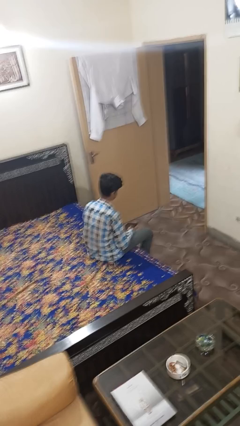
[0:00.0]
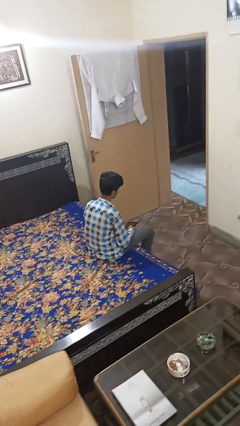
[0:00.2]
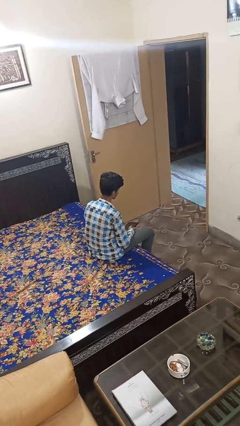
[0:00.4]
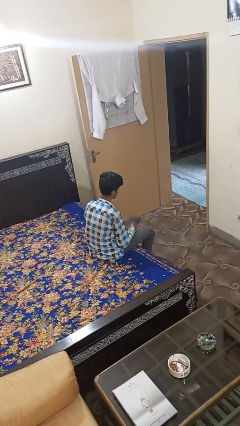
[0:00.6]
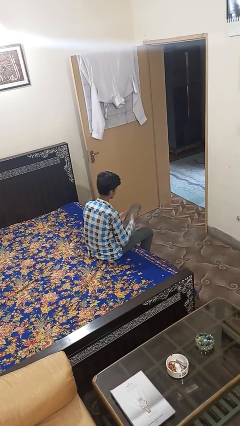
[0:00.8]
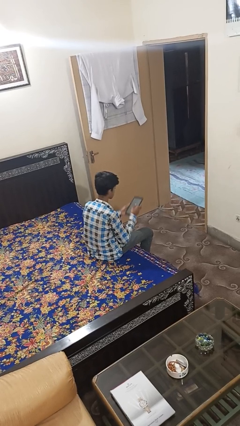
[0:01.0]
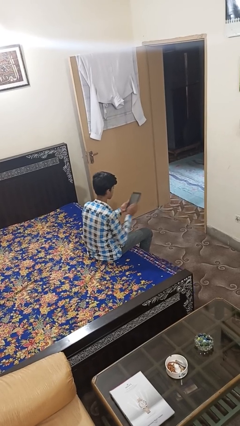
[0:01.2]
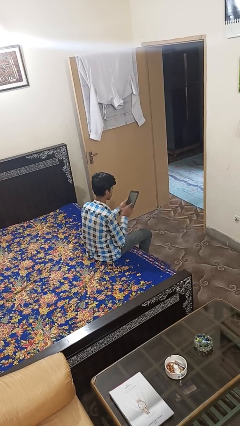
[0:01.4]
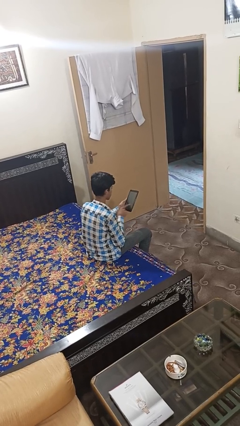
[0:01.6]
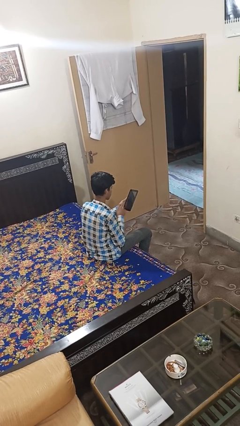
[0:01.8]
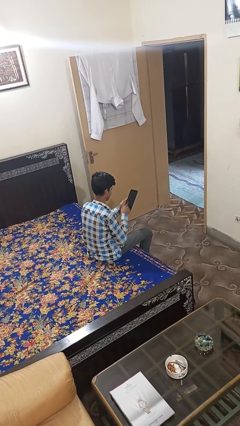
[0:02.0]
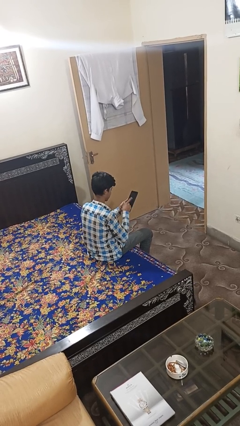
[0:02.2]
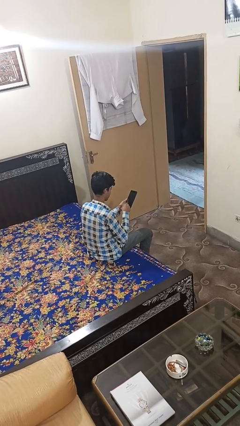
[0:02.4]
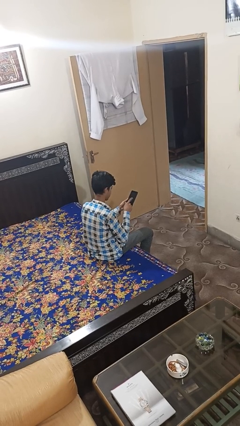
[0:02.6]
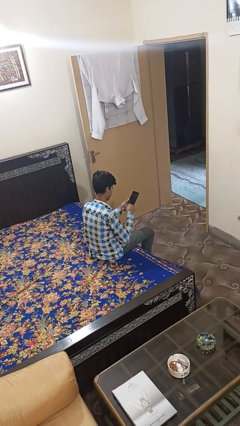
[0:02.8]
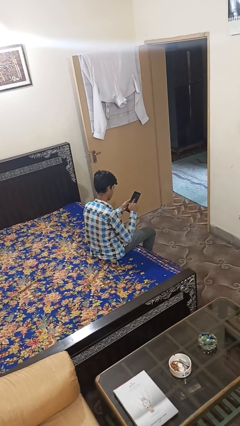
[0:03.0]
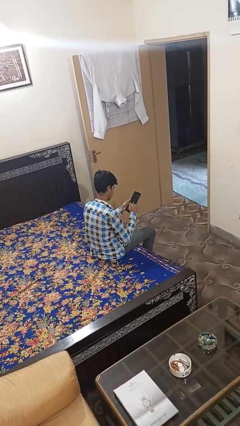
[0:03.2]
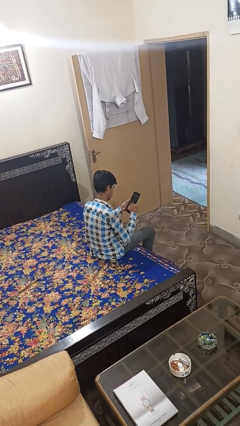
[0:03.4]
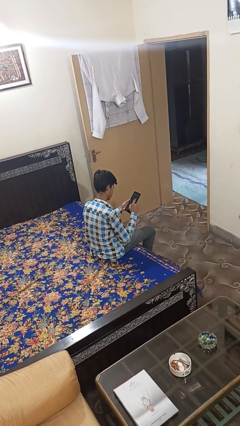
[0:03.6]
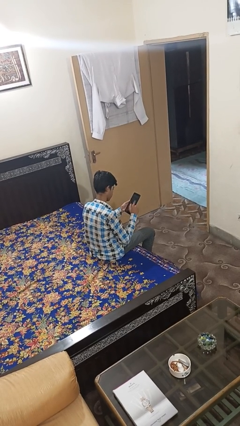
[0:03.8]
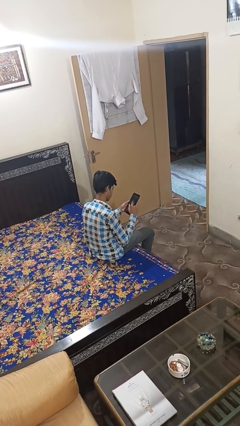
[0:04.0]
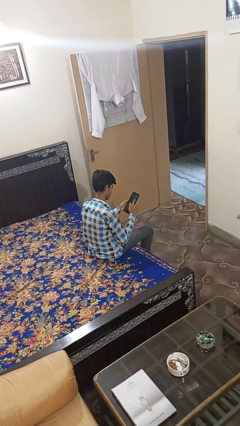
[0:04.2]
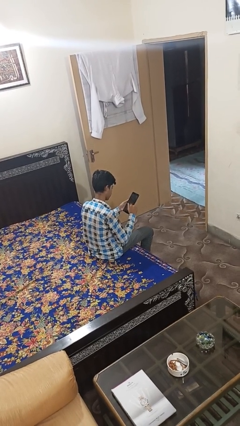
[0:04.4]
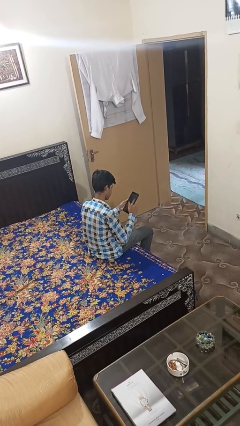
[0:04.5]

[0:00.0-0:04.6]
person interacts with tablet

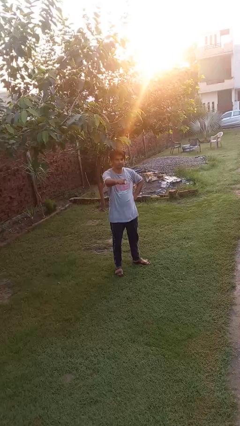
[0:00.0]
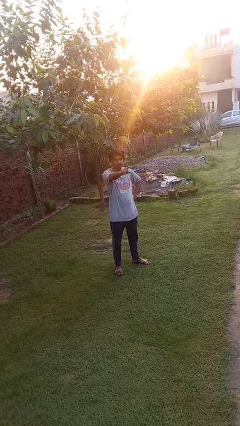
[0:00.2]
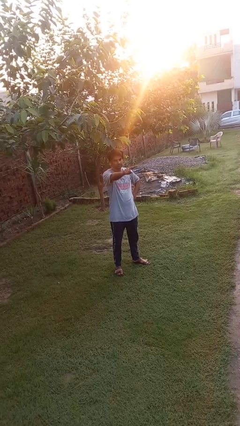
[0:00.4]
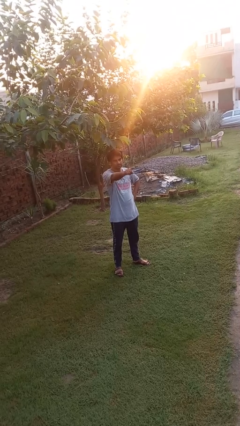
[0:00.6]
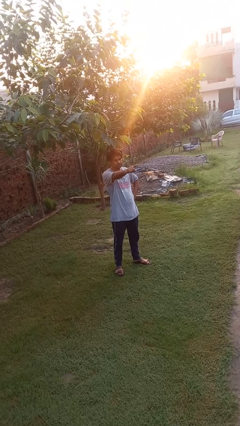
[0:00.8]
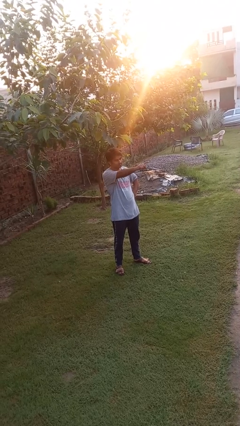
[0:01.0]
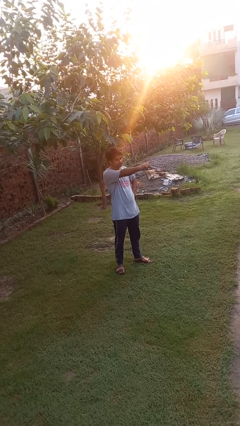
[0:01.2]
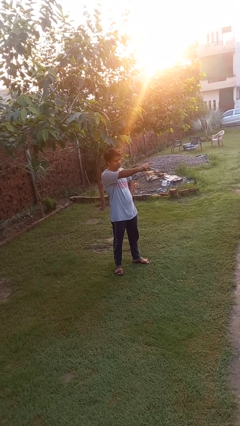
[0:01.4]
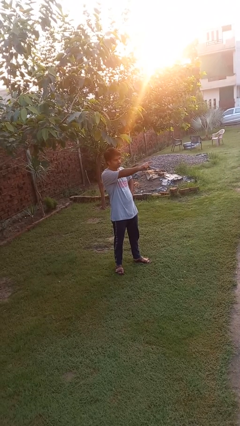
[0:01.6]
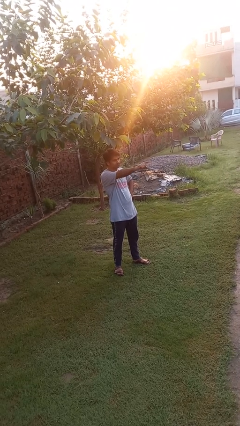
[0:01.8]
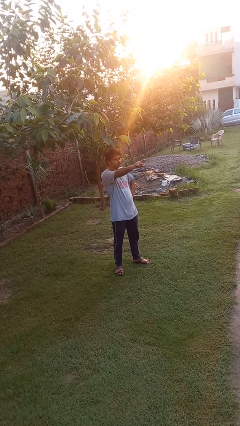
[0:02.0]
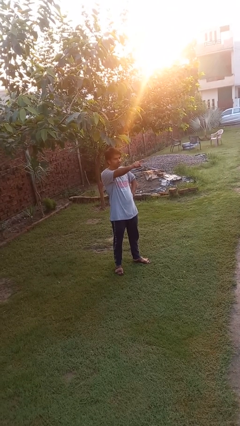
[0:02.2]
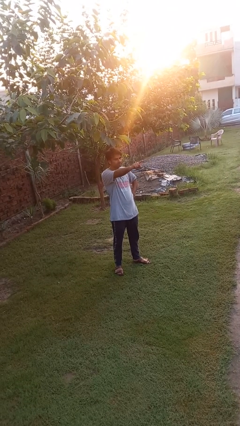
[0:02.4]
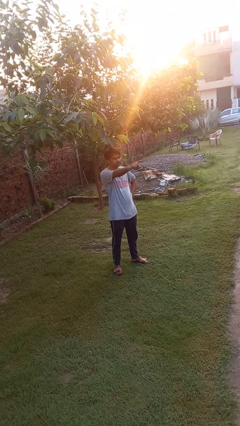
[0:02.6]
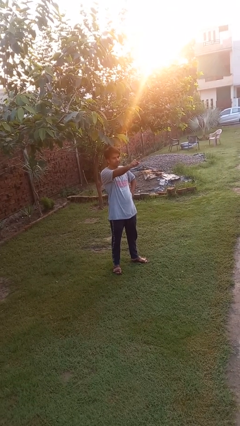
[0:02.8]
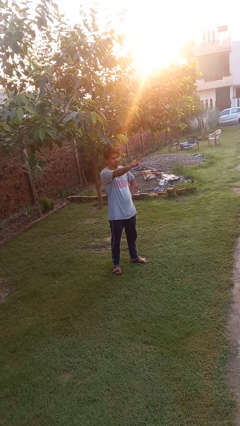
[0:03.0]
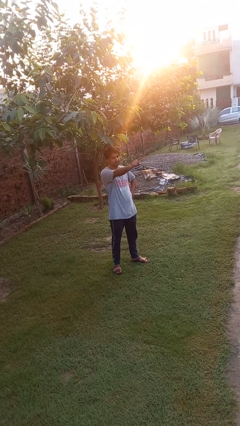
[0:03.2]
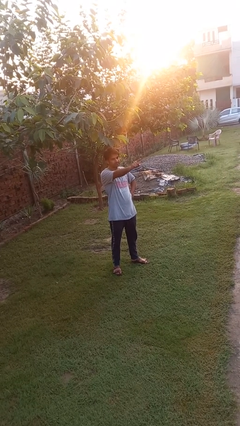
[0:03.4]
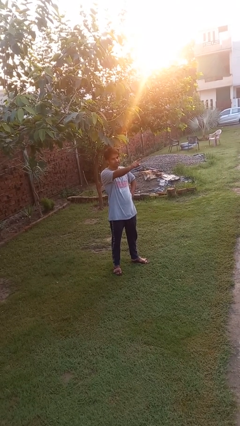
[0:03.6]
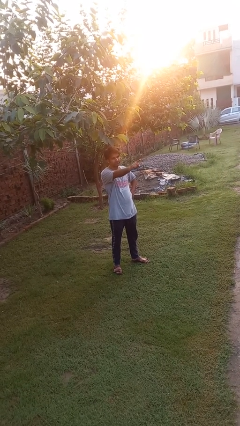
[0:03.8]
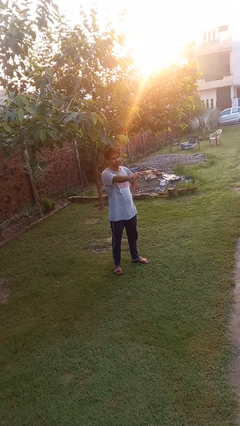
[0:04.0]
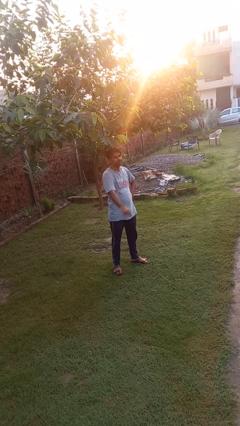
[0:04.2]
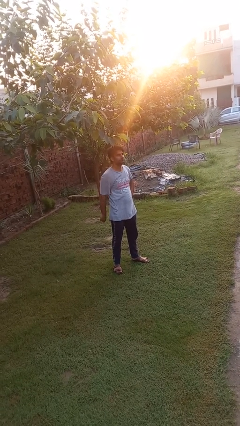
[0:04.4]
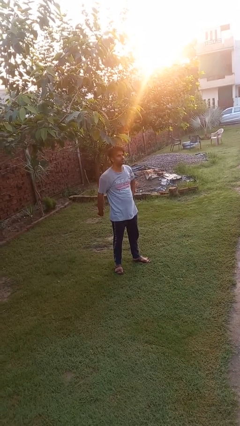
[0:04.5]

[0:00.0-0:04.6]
person points at person

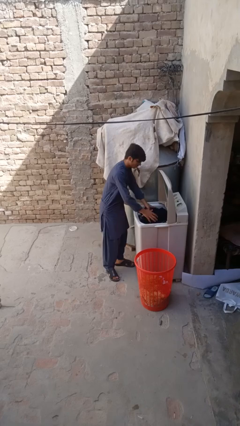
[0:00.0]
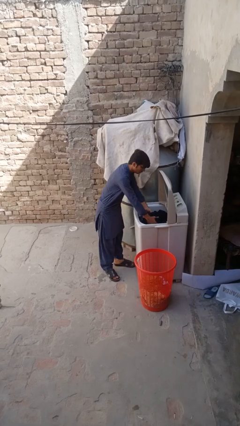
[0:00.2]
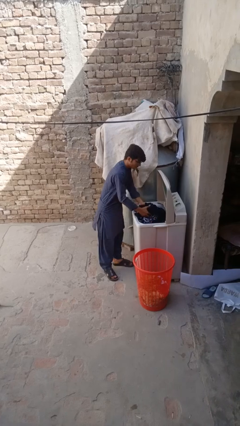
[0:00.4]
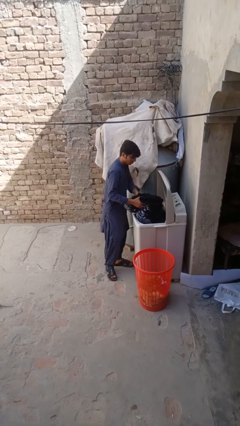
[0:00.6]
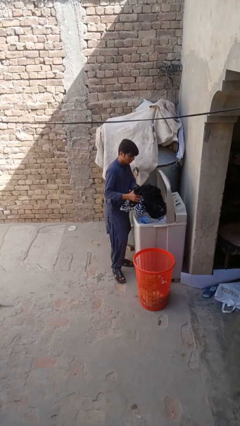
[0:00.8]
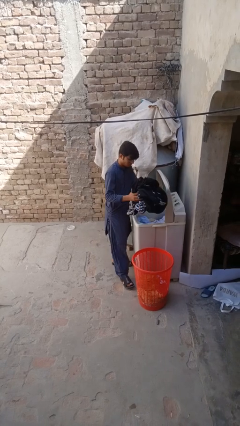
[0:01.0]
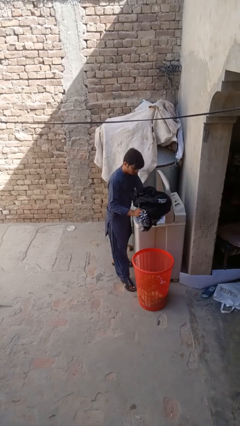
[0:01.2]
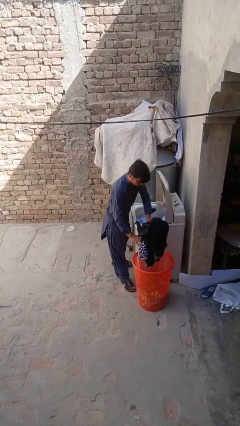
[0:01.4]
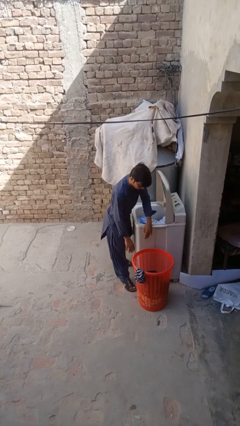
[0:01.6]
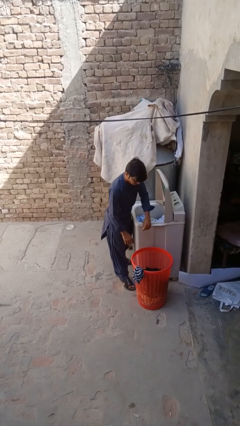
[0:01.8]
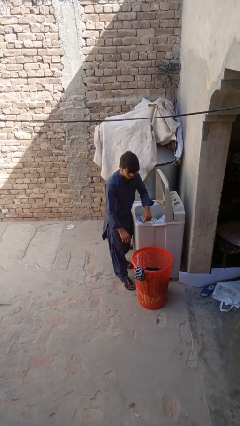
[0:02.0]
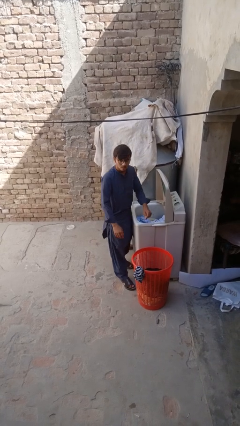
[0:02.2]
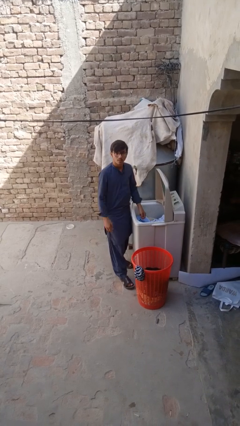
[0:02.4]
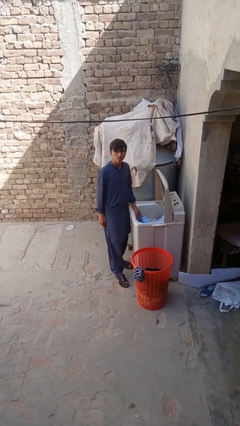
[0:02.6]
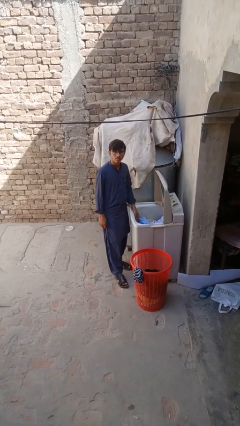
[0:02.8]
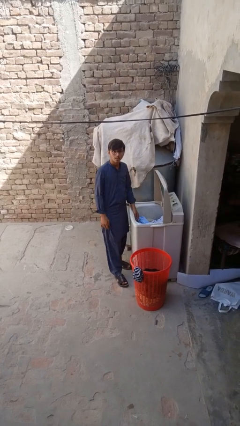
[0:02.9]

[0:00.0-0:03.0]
person unloads clotheswasher

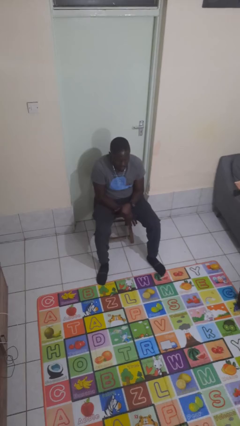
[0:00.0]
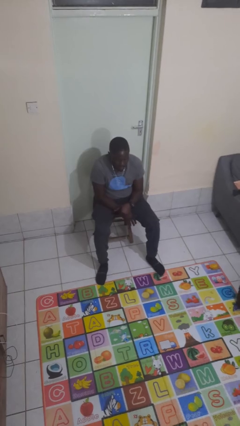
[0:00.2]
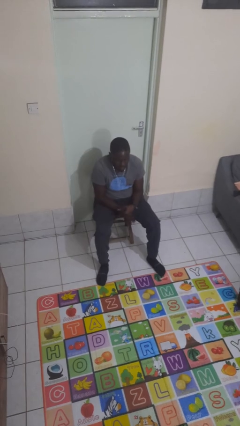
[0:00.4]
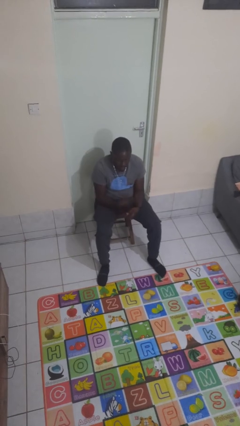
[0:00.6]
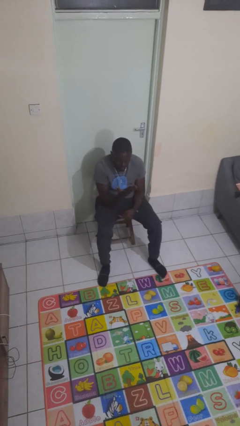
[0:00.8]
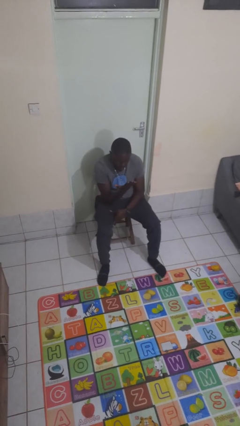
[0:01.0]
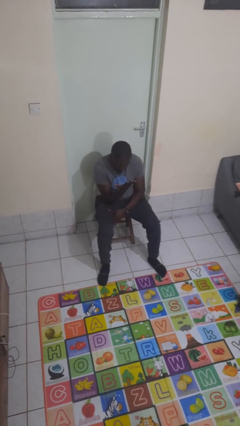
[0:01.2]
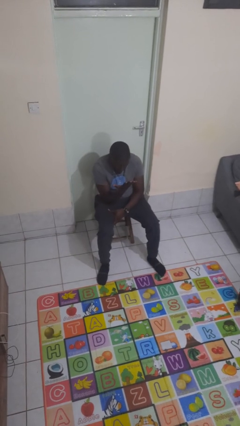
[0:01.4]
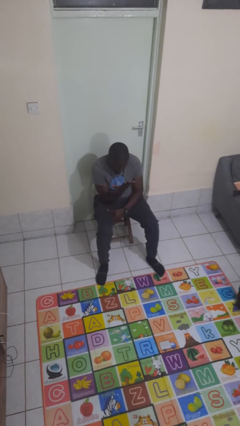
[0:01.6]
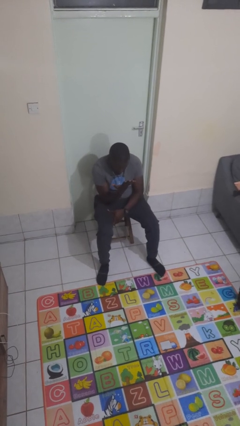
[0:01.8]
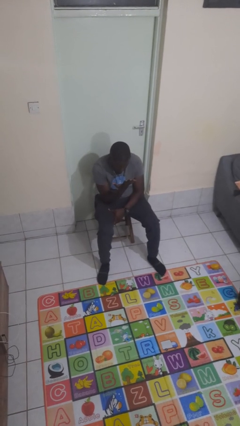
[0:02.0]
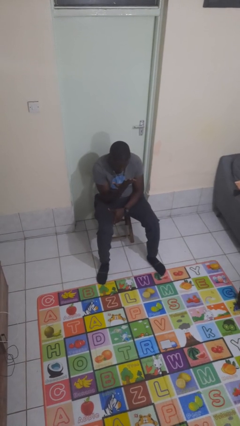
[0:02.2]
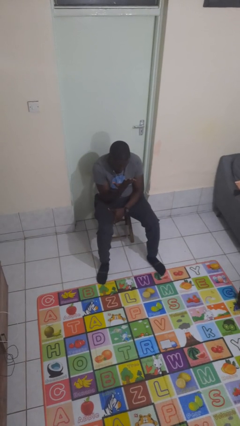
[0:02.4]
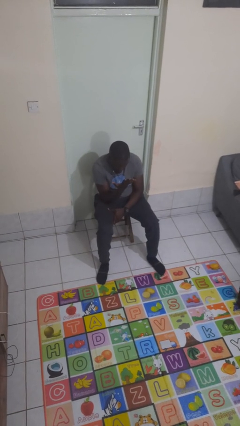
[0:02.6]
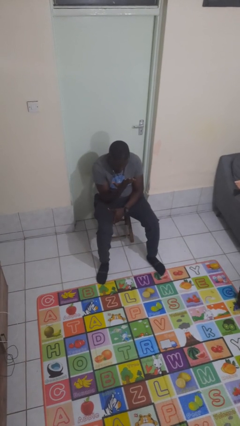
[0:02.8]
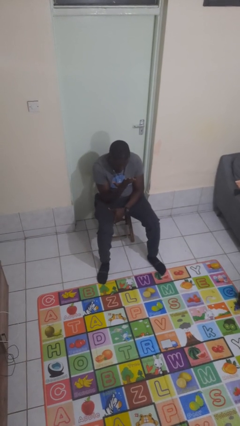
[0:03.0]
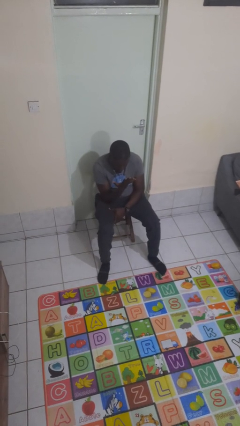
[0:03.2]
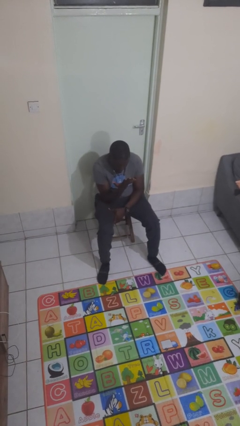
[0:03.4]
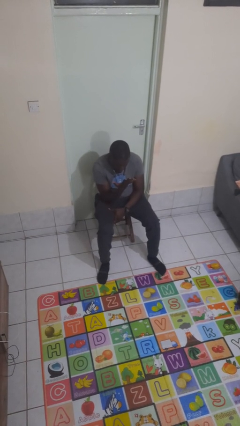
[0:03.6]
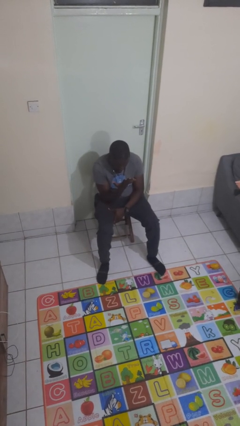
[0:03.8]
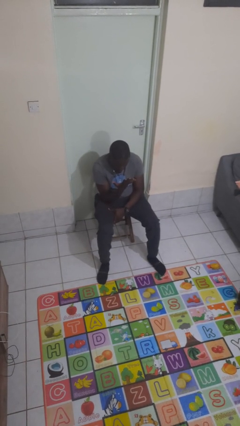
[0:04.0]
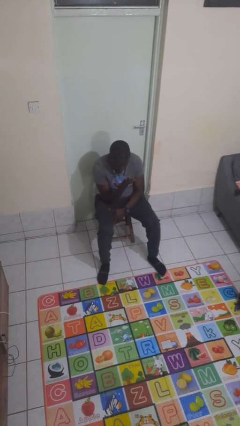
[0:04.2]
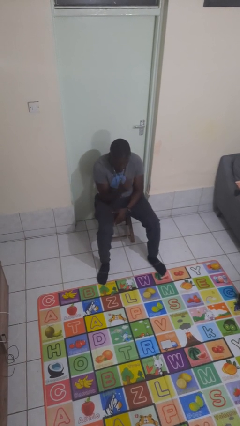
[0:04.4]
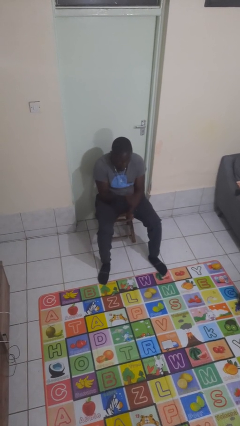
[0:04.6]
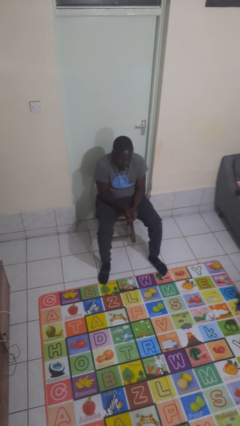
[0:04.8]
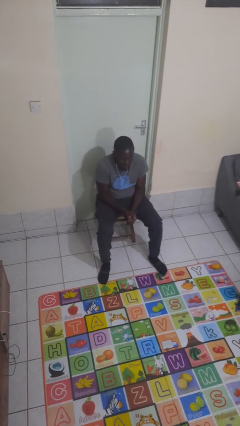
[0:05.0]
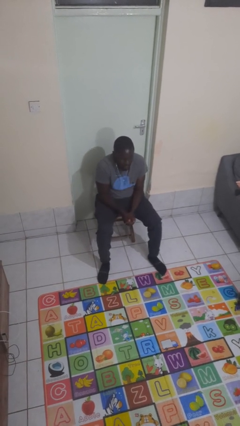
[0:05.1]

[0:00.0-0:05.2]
person looks at hands in lap

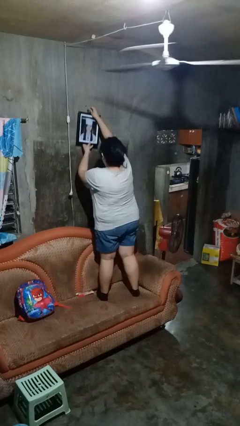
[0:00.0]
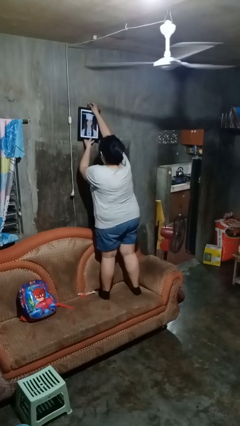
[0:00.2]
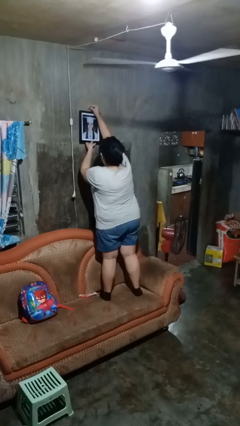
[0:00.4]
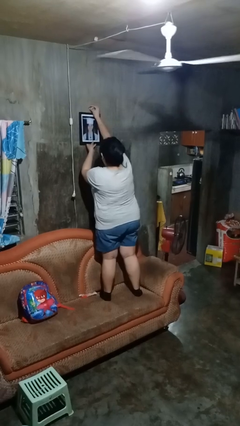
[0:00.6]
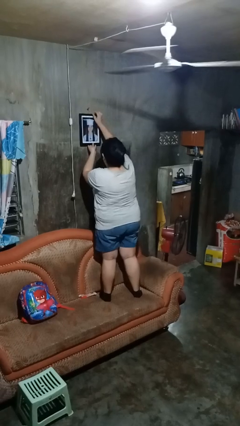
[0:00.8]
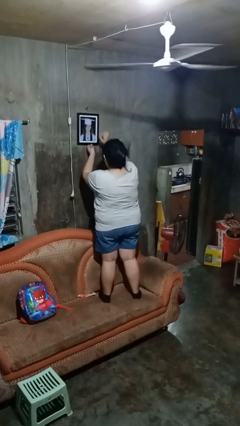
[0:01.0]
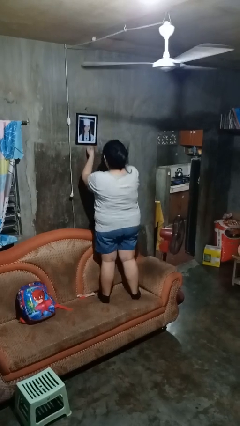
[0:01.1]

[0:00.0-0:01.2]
person puts up picture frame
